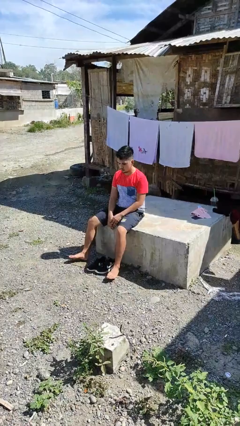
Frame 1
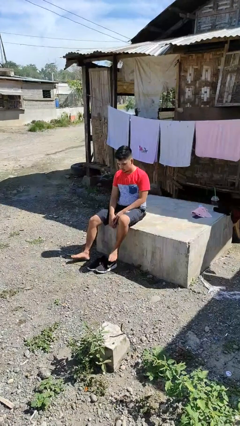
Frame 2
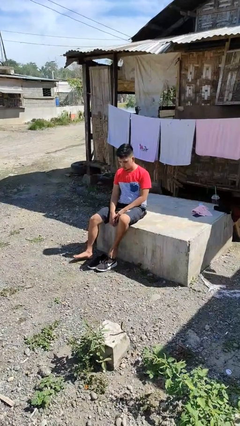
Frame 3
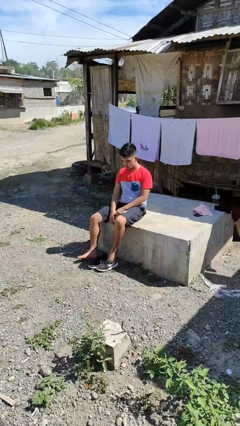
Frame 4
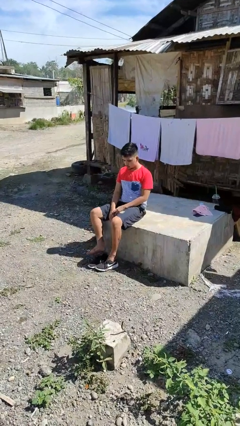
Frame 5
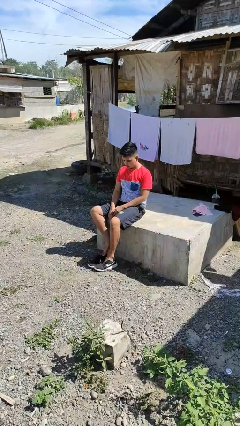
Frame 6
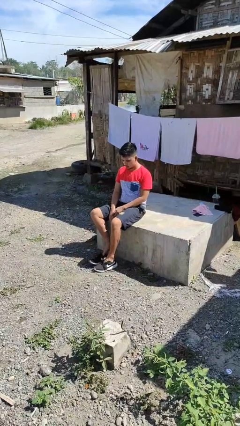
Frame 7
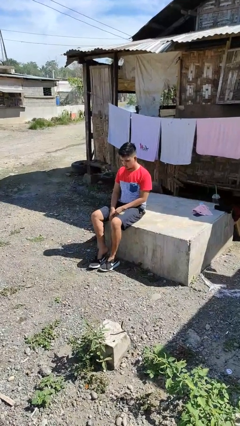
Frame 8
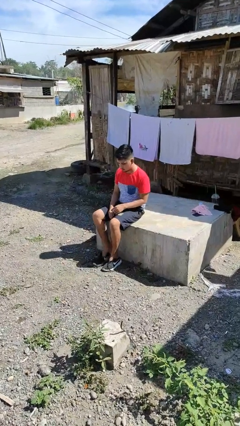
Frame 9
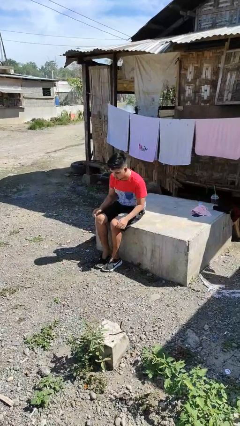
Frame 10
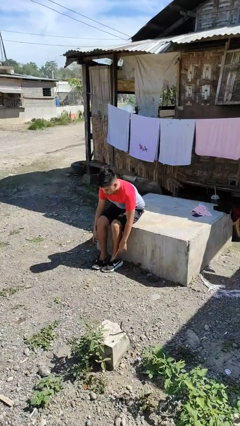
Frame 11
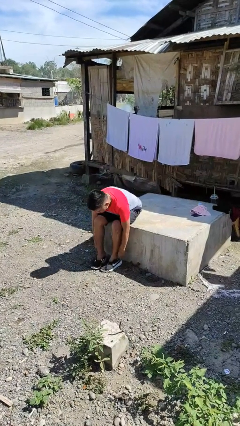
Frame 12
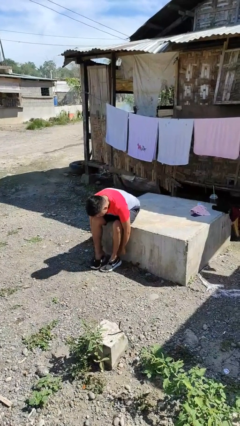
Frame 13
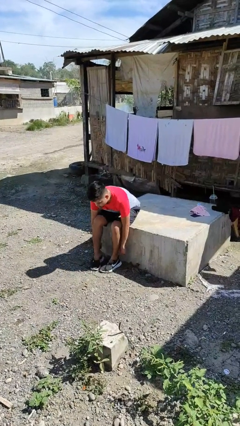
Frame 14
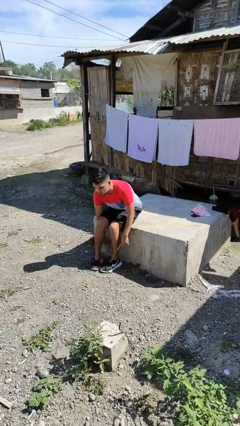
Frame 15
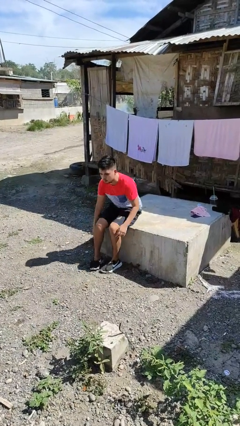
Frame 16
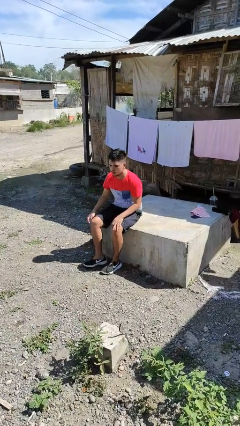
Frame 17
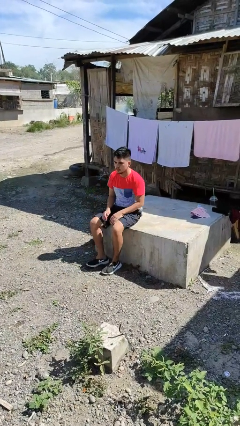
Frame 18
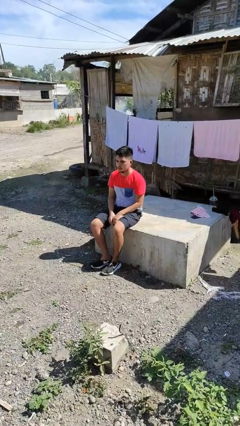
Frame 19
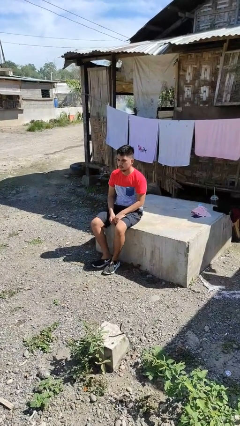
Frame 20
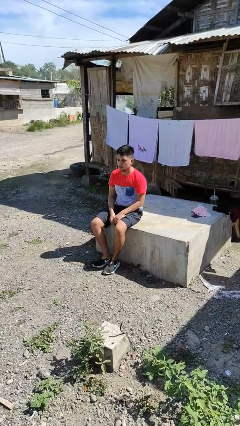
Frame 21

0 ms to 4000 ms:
person puts on shoes

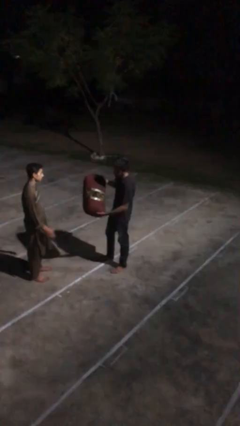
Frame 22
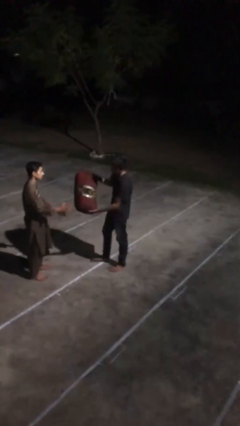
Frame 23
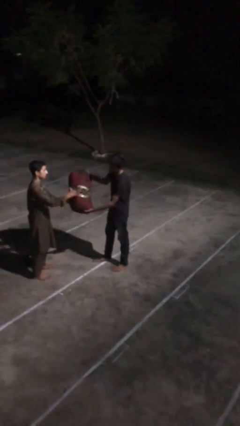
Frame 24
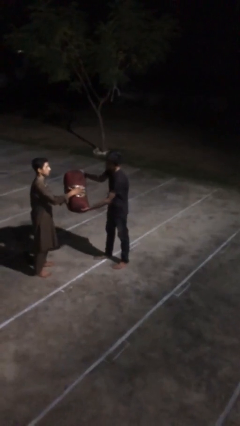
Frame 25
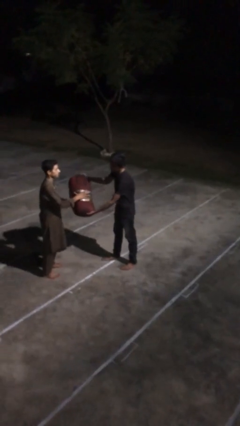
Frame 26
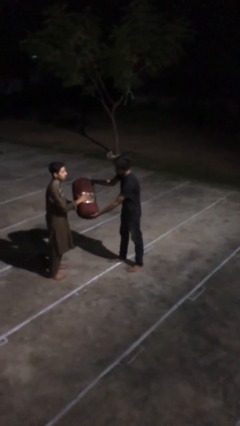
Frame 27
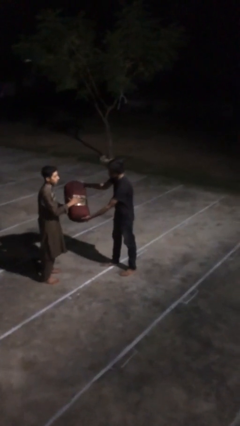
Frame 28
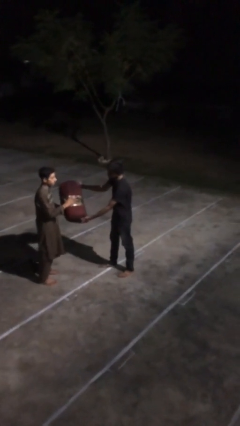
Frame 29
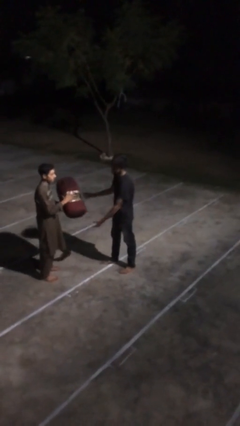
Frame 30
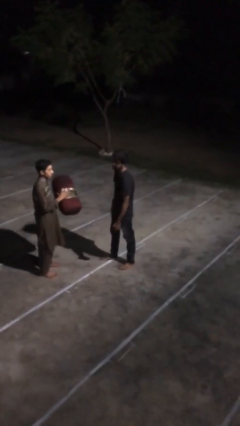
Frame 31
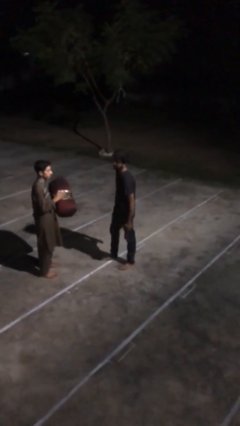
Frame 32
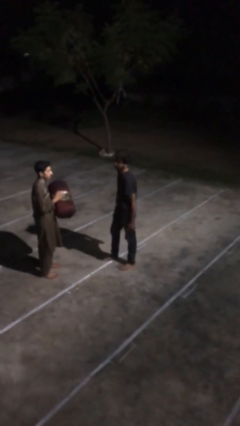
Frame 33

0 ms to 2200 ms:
person transfers object to person

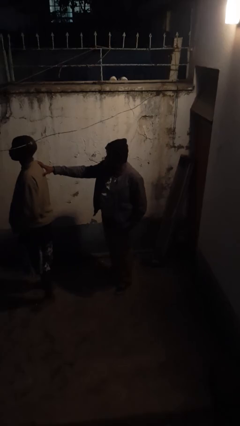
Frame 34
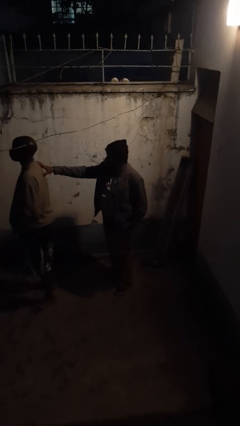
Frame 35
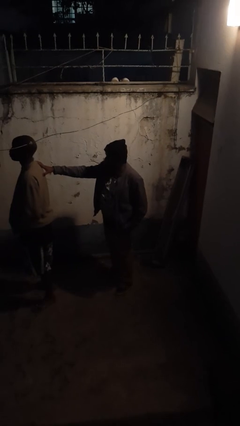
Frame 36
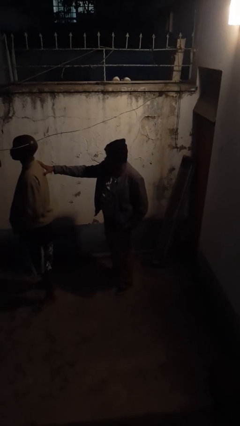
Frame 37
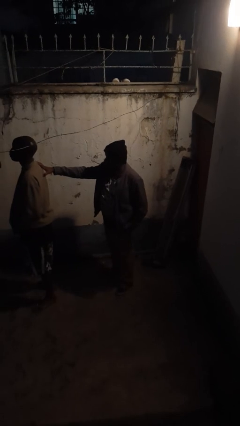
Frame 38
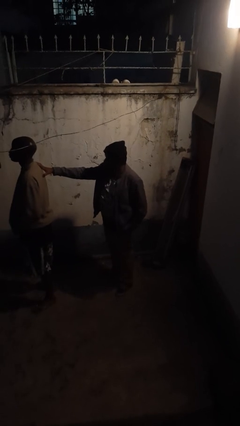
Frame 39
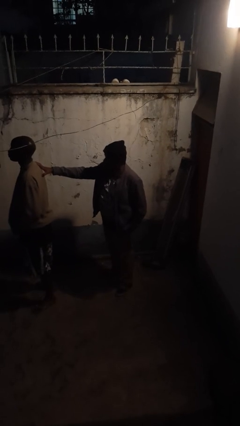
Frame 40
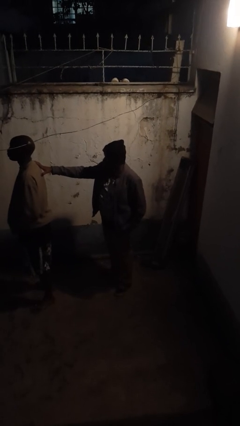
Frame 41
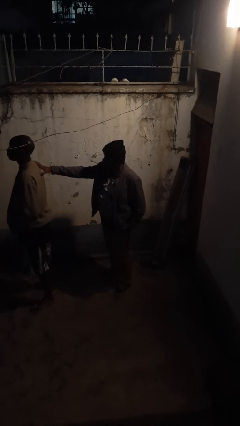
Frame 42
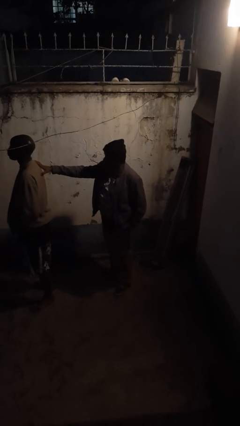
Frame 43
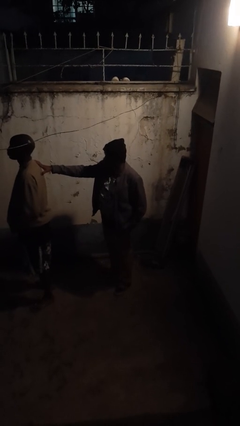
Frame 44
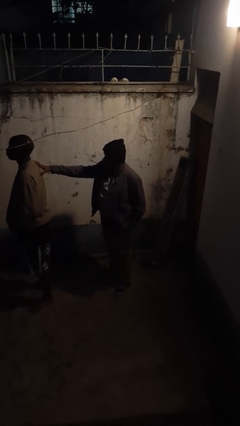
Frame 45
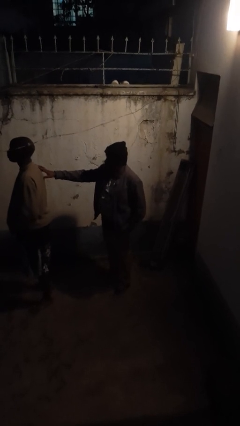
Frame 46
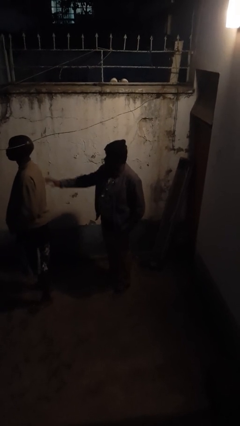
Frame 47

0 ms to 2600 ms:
person touches back of person

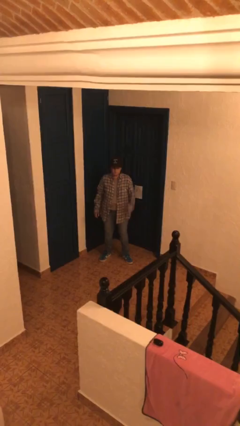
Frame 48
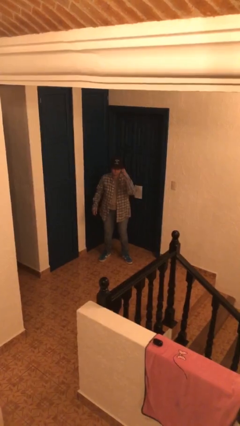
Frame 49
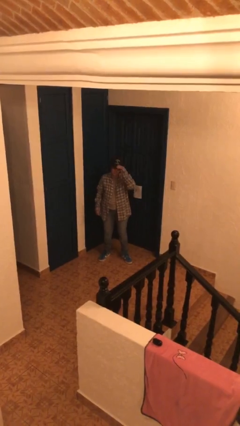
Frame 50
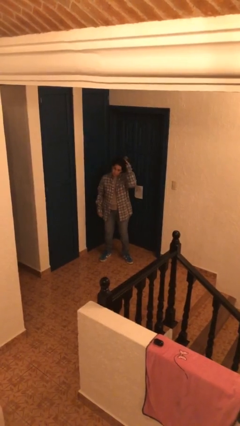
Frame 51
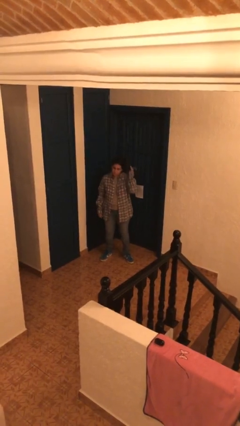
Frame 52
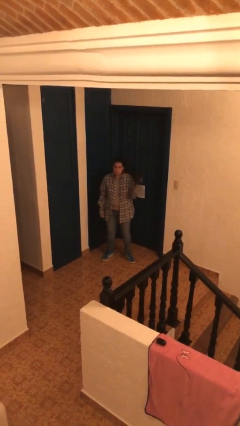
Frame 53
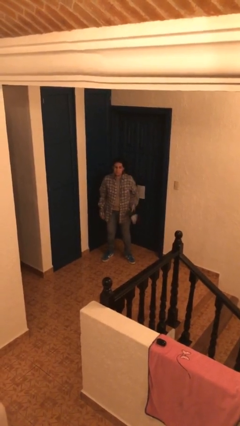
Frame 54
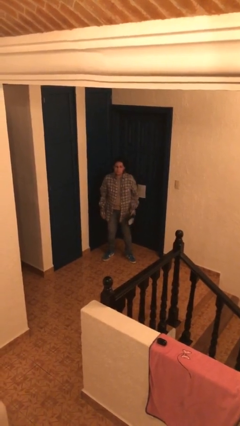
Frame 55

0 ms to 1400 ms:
person takes off hat

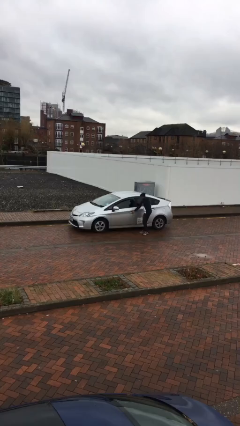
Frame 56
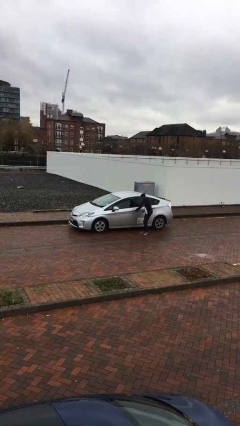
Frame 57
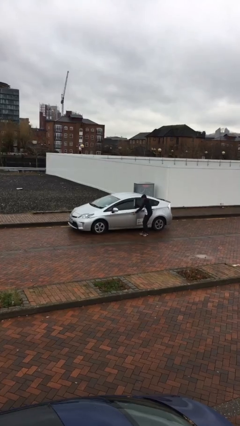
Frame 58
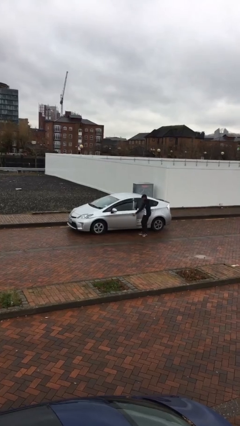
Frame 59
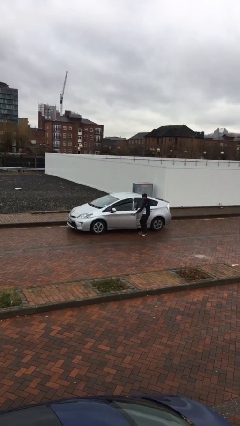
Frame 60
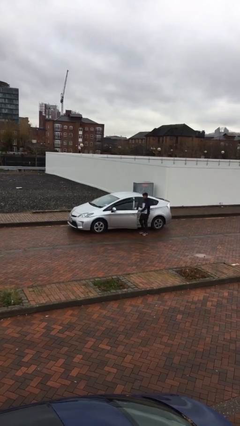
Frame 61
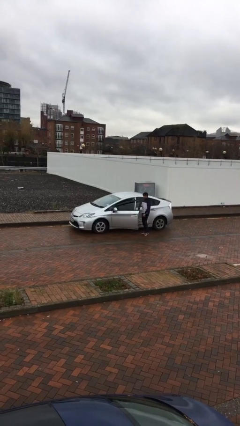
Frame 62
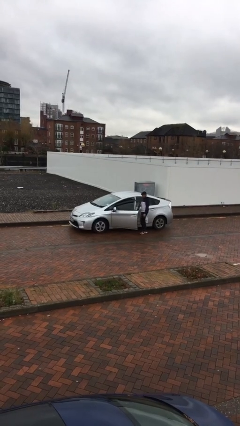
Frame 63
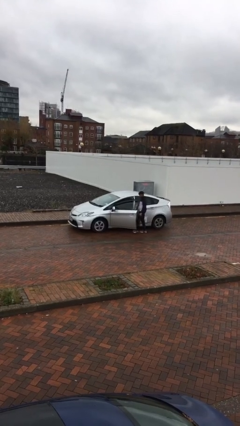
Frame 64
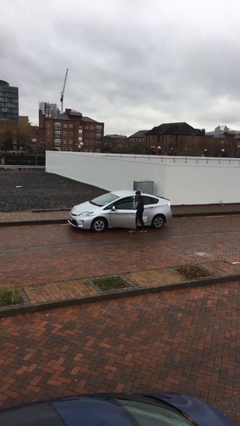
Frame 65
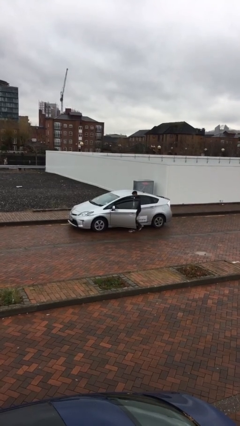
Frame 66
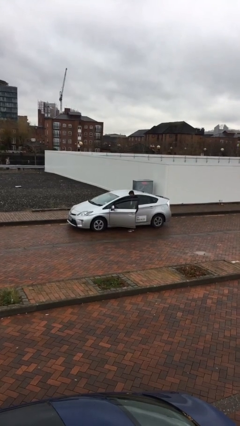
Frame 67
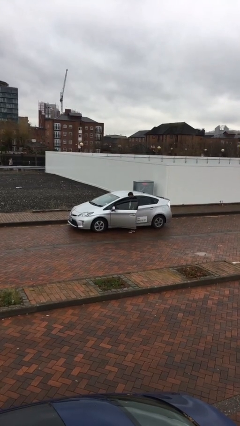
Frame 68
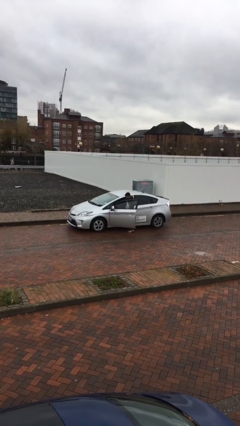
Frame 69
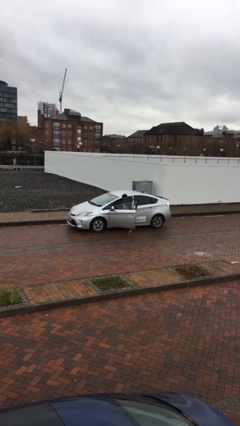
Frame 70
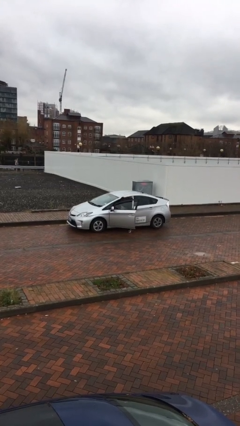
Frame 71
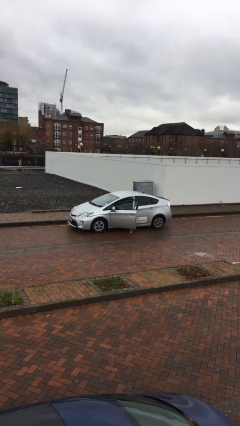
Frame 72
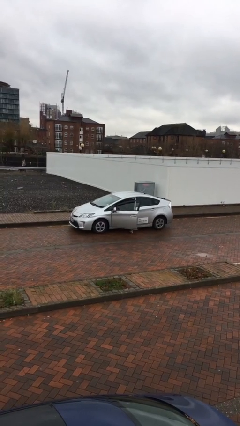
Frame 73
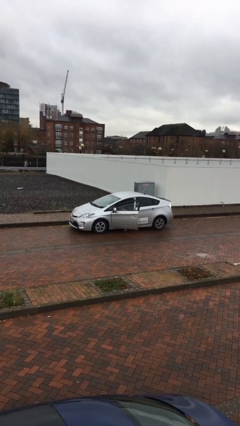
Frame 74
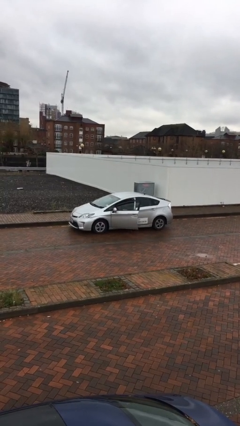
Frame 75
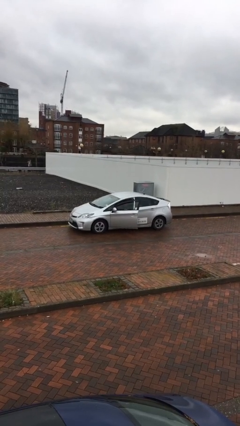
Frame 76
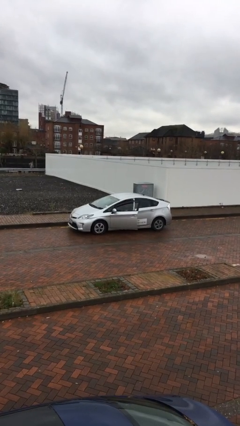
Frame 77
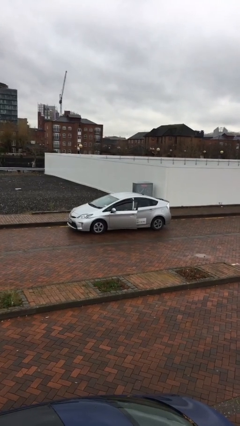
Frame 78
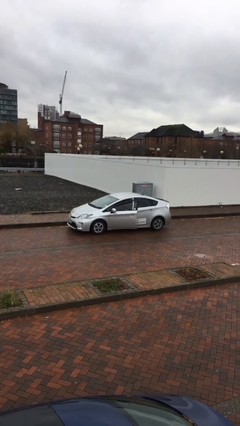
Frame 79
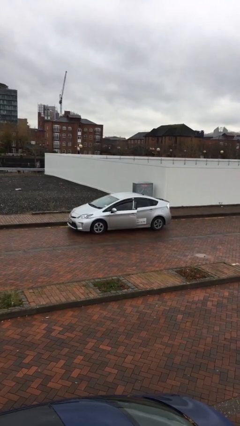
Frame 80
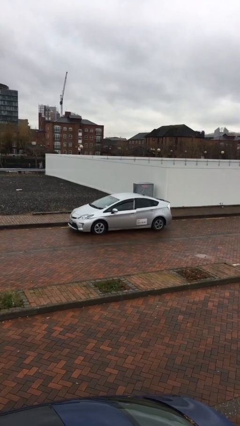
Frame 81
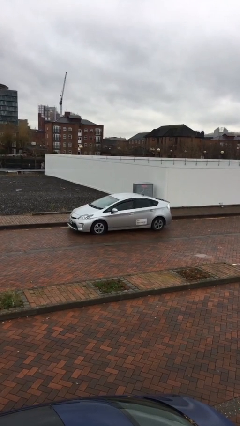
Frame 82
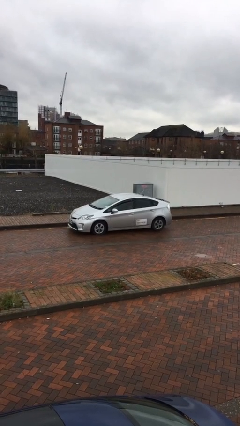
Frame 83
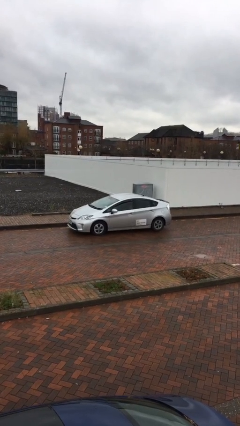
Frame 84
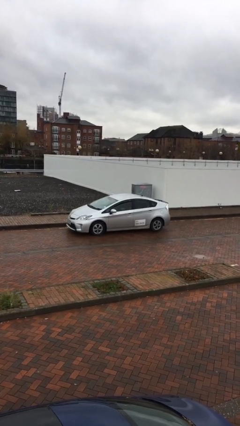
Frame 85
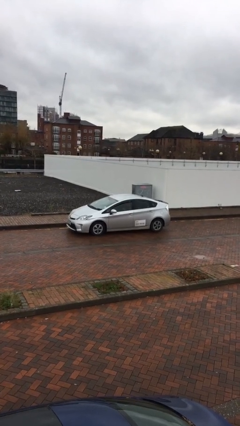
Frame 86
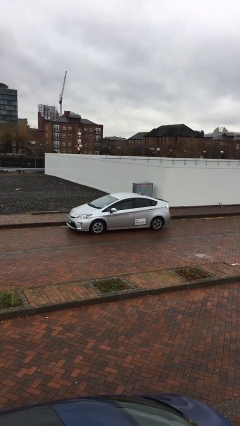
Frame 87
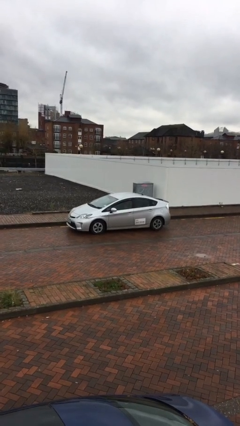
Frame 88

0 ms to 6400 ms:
car picks up person

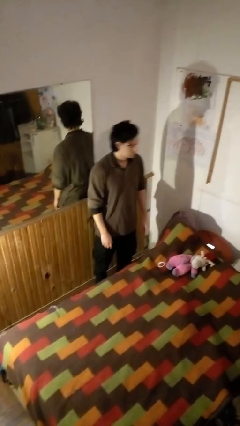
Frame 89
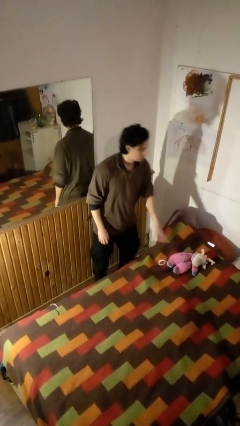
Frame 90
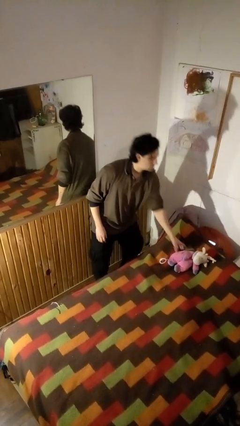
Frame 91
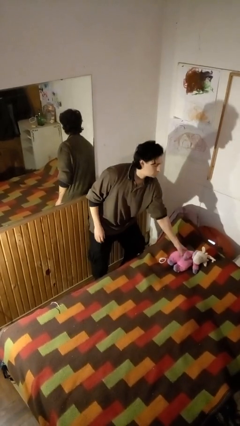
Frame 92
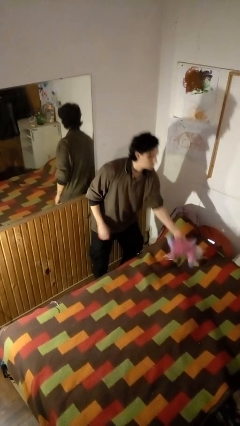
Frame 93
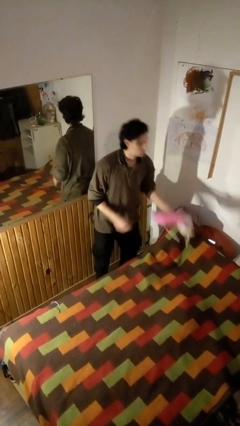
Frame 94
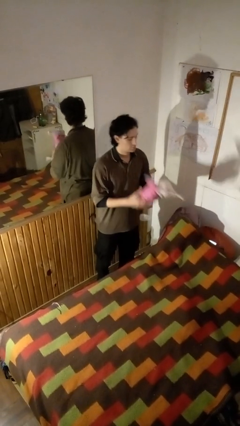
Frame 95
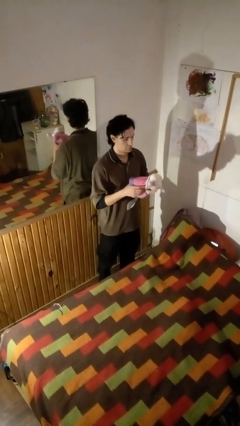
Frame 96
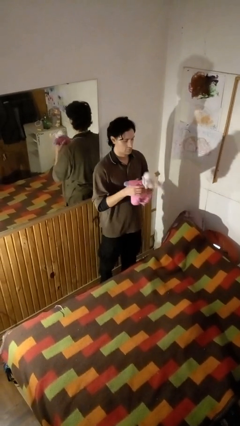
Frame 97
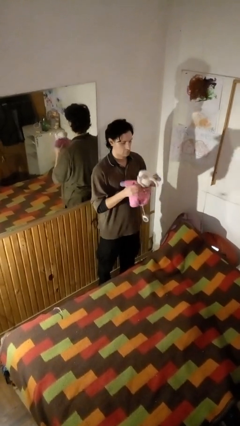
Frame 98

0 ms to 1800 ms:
person picks up object from bed
